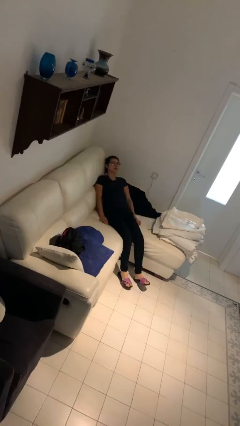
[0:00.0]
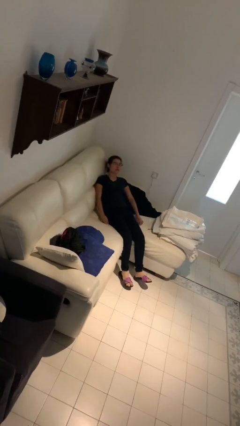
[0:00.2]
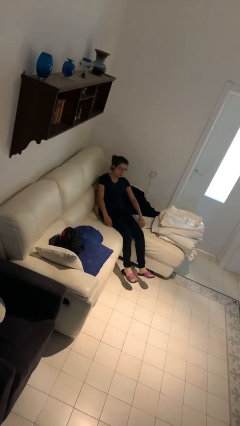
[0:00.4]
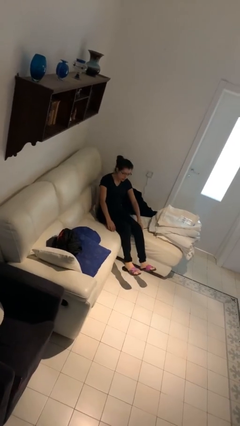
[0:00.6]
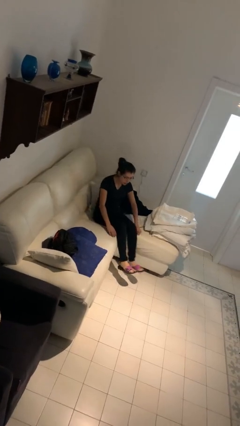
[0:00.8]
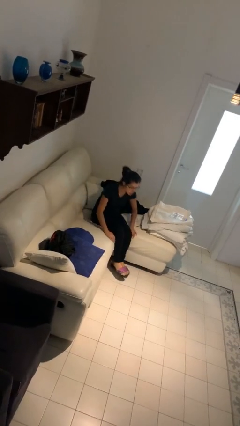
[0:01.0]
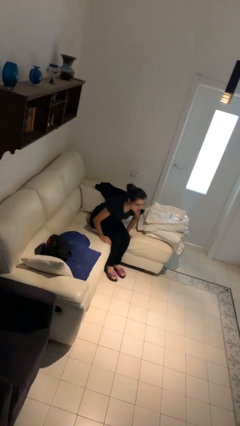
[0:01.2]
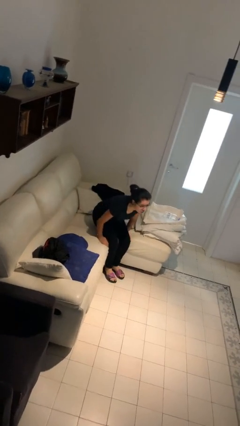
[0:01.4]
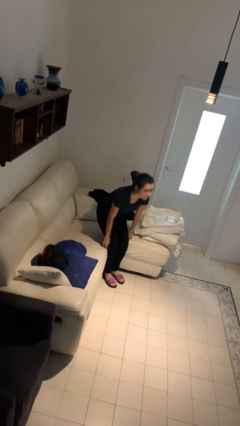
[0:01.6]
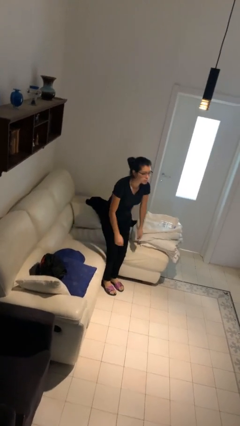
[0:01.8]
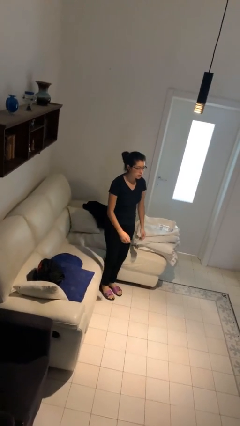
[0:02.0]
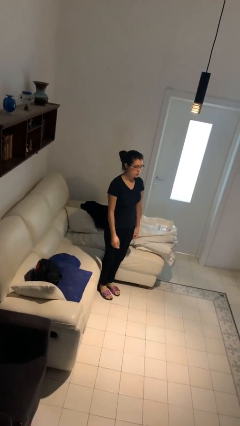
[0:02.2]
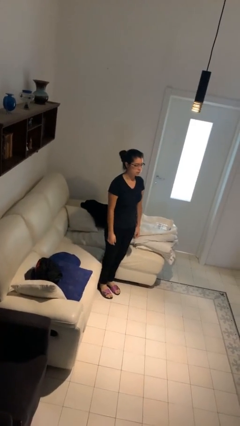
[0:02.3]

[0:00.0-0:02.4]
person stands up

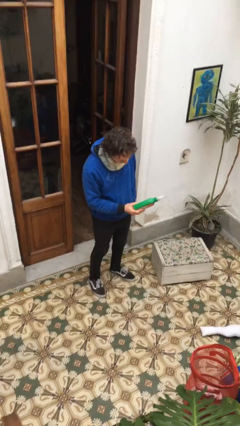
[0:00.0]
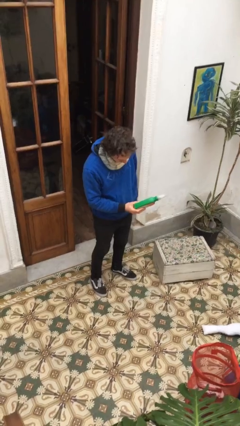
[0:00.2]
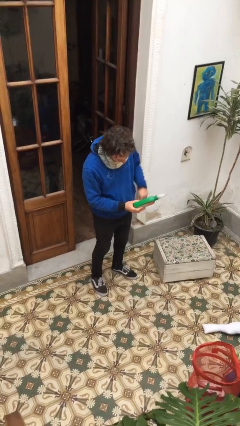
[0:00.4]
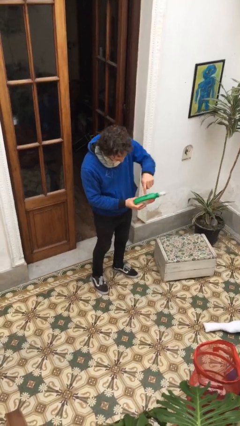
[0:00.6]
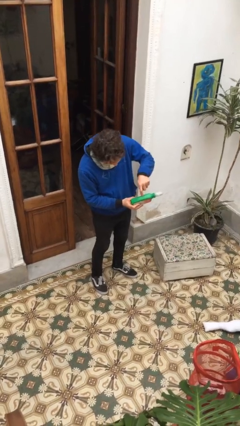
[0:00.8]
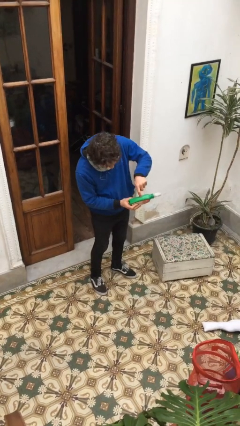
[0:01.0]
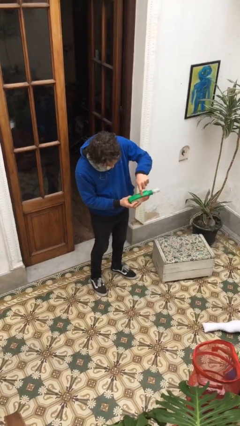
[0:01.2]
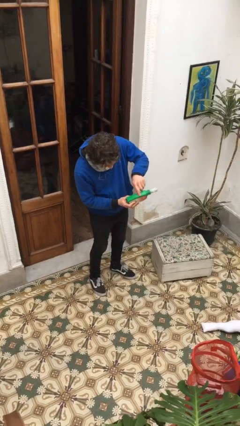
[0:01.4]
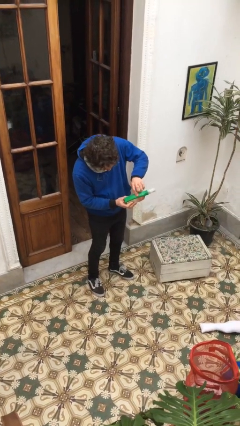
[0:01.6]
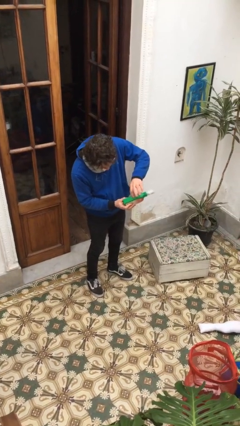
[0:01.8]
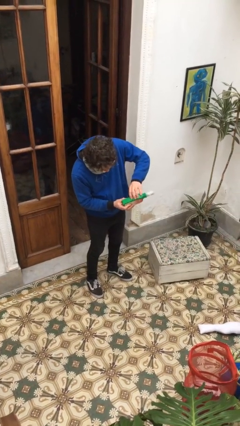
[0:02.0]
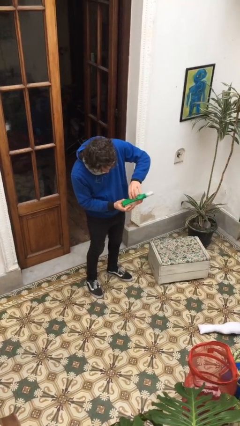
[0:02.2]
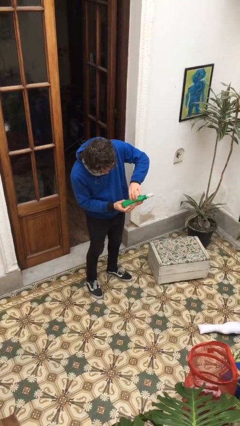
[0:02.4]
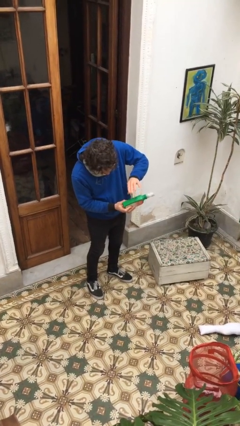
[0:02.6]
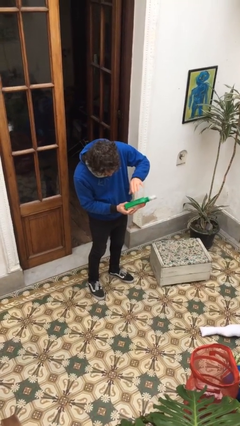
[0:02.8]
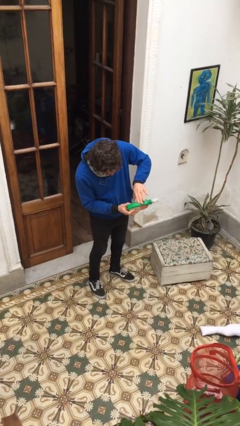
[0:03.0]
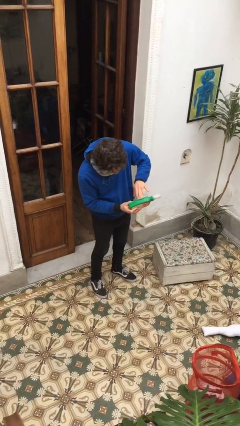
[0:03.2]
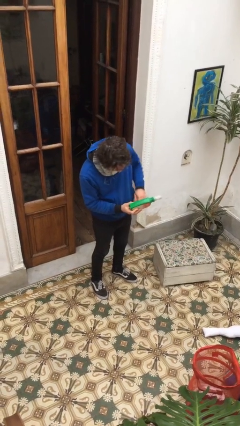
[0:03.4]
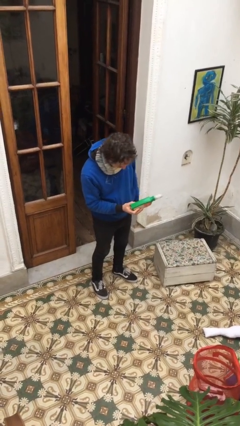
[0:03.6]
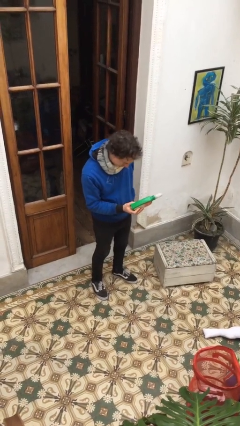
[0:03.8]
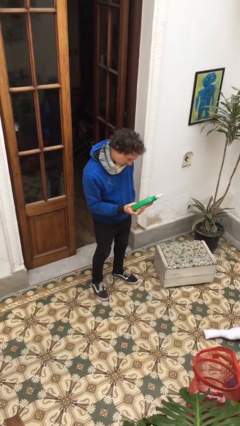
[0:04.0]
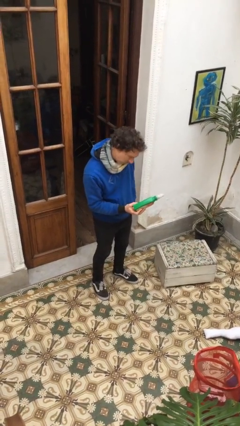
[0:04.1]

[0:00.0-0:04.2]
person taps object with finger

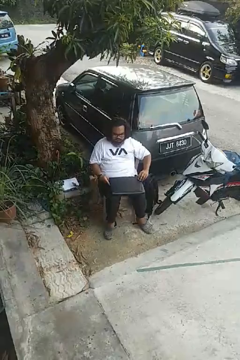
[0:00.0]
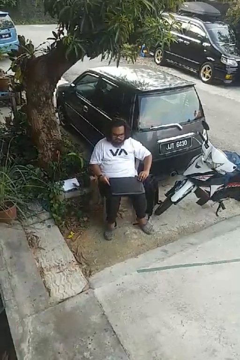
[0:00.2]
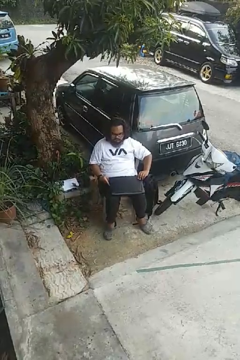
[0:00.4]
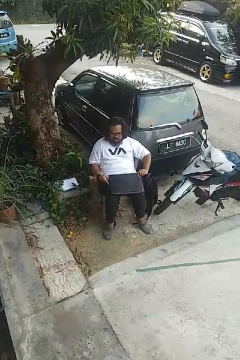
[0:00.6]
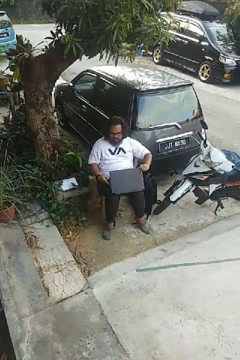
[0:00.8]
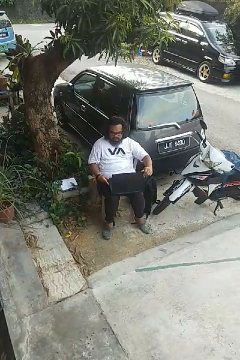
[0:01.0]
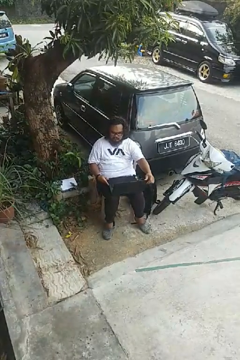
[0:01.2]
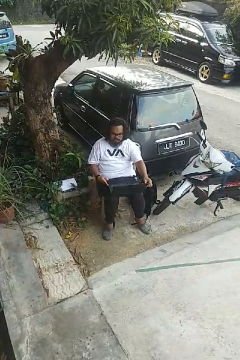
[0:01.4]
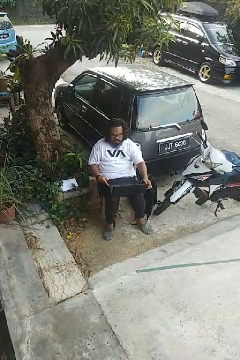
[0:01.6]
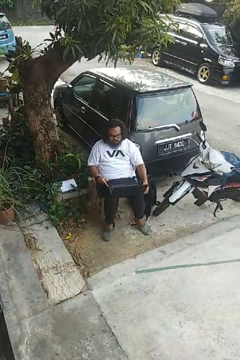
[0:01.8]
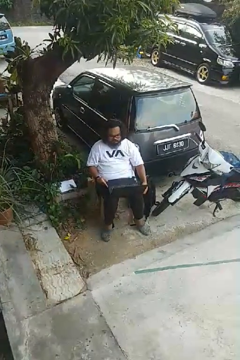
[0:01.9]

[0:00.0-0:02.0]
person opens laptop

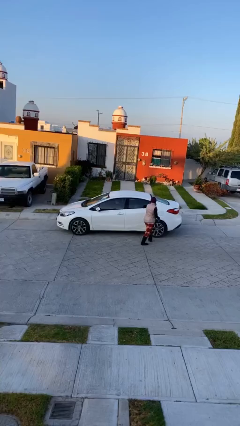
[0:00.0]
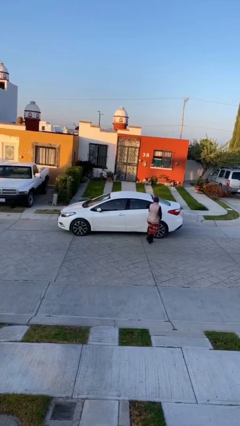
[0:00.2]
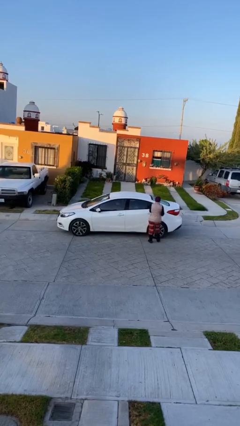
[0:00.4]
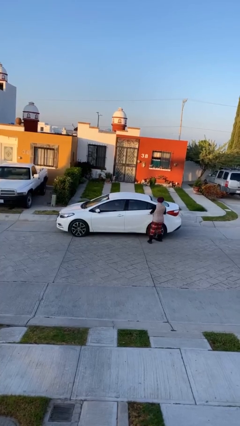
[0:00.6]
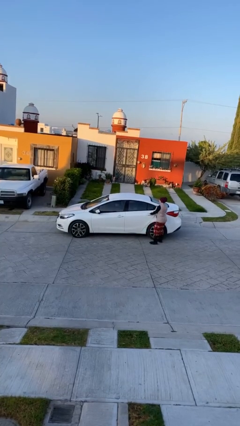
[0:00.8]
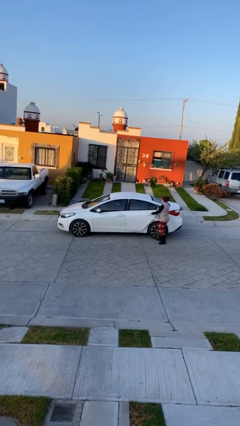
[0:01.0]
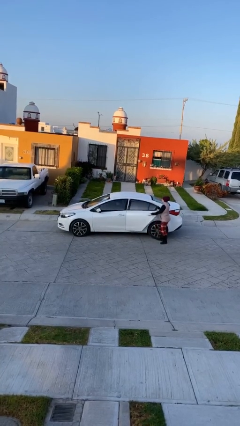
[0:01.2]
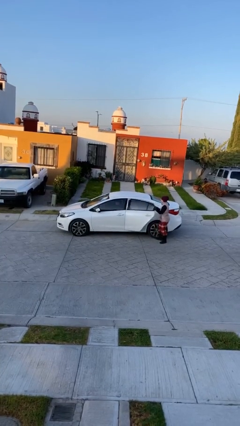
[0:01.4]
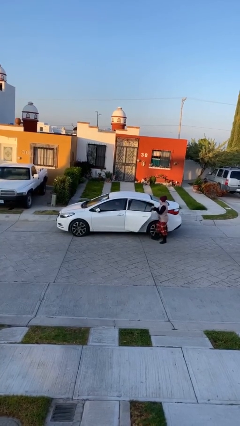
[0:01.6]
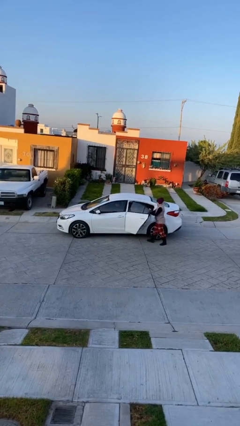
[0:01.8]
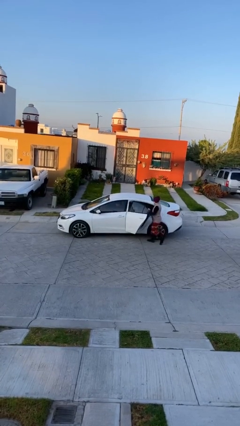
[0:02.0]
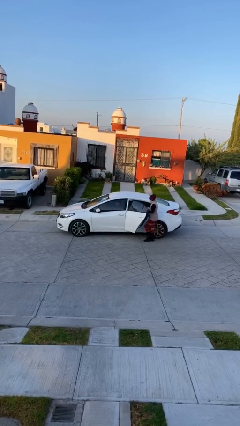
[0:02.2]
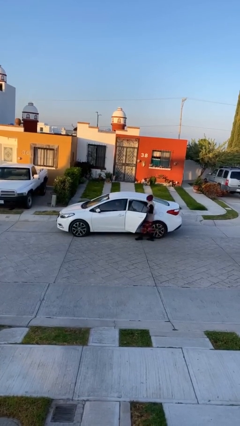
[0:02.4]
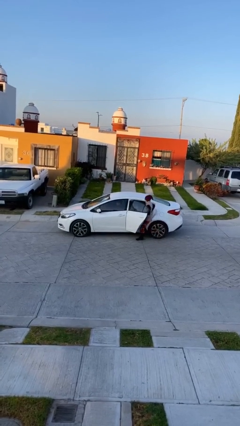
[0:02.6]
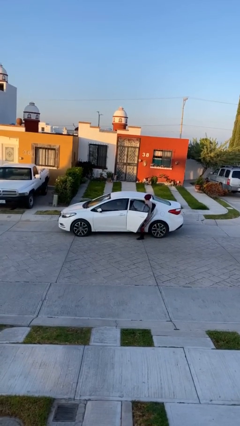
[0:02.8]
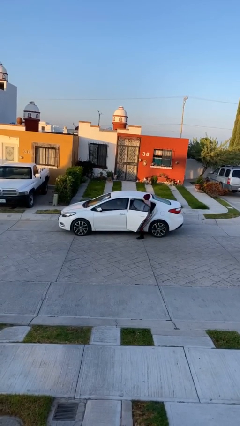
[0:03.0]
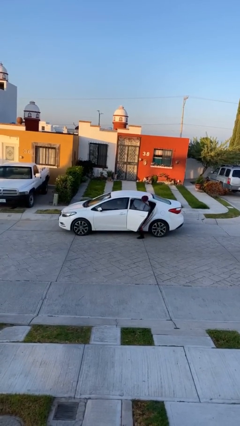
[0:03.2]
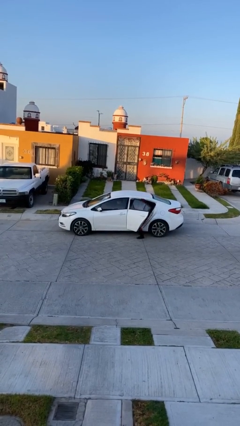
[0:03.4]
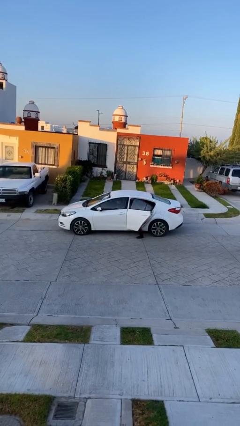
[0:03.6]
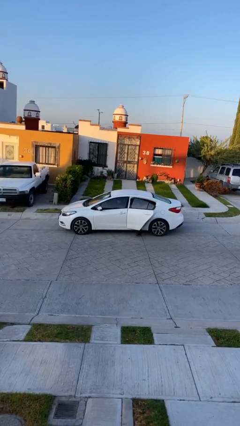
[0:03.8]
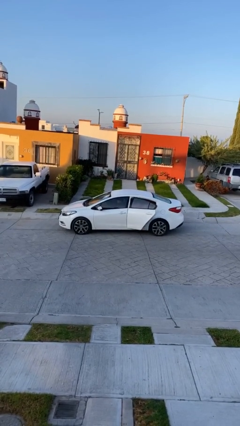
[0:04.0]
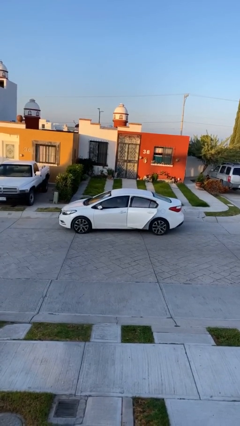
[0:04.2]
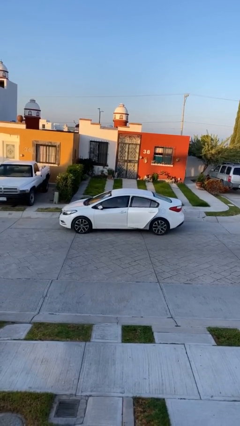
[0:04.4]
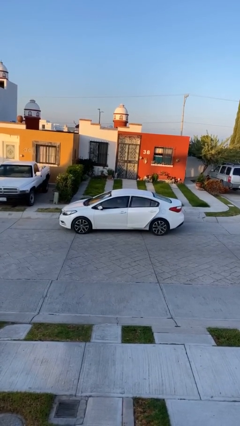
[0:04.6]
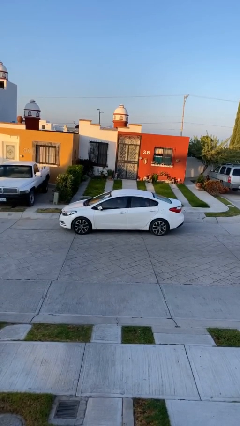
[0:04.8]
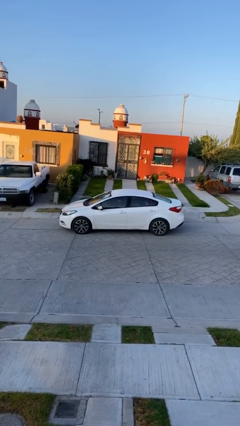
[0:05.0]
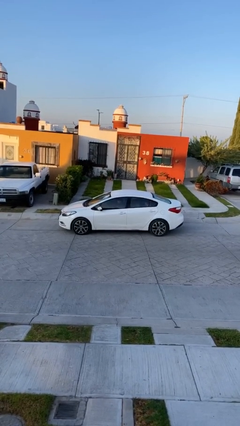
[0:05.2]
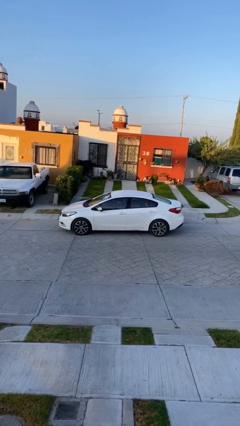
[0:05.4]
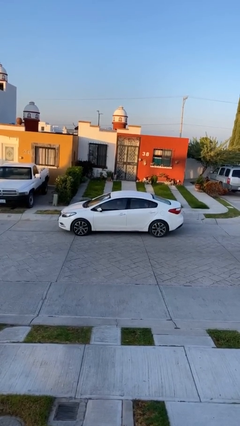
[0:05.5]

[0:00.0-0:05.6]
car picks up person

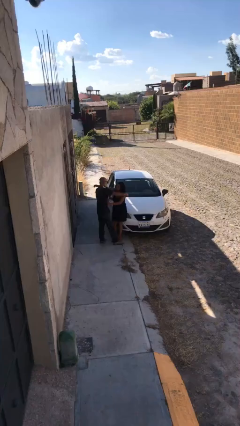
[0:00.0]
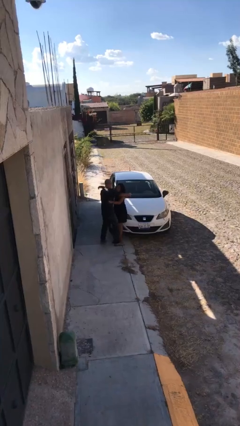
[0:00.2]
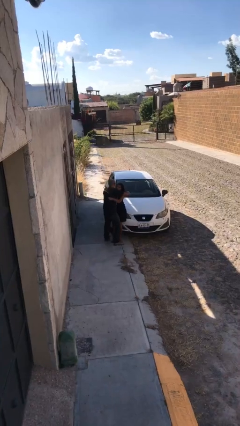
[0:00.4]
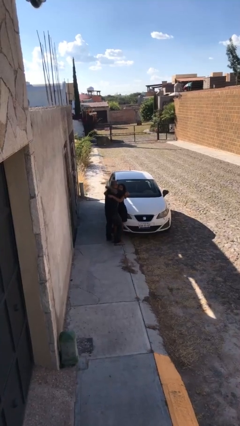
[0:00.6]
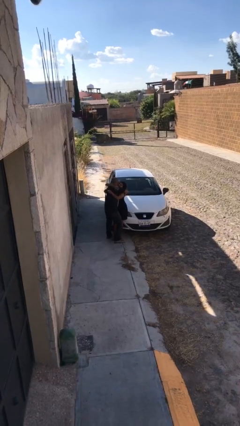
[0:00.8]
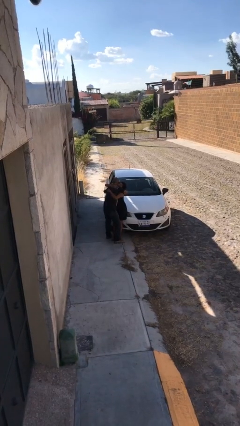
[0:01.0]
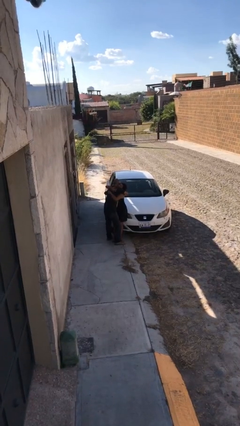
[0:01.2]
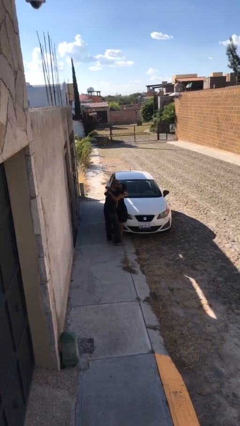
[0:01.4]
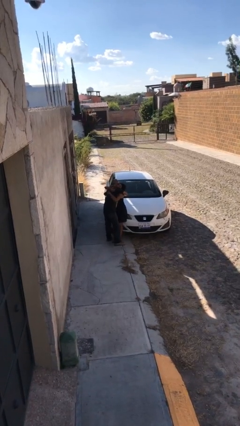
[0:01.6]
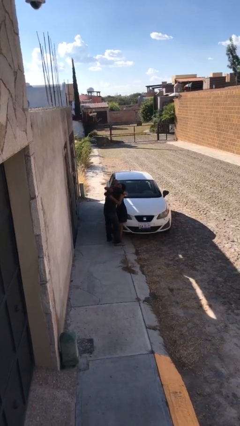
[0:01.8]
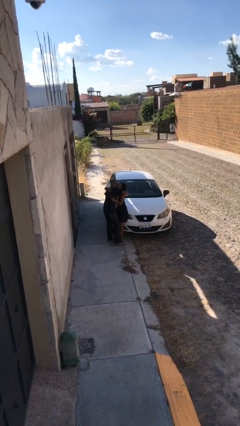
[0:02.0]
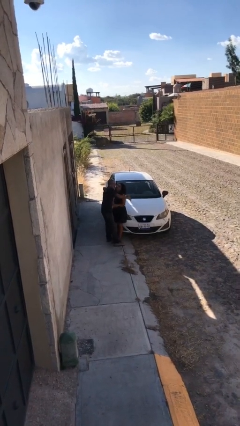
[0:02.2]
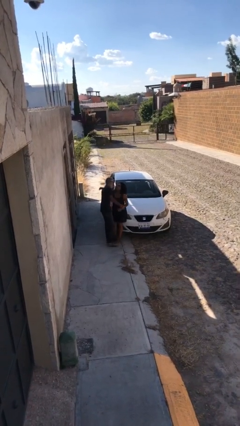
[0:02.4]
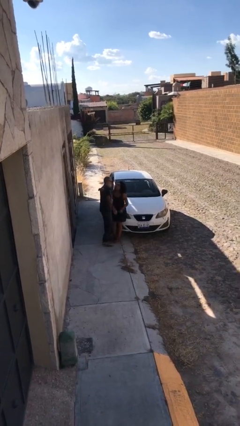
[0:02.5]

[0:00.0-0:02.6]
person embraces person

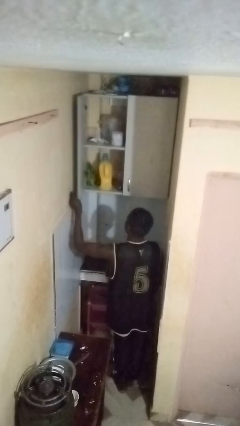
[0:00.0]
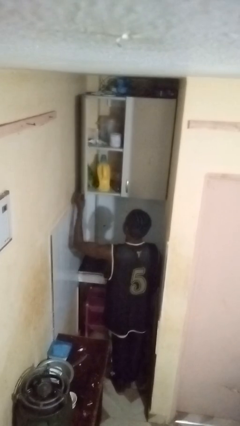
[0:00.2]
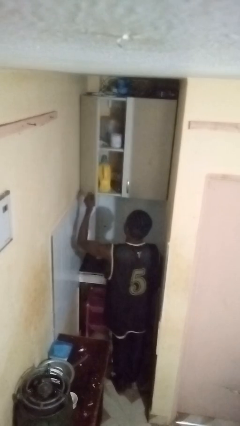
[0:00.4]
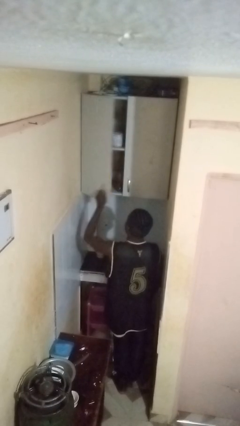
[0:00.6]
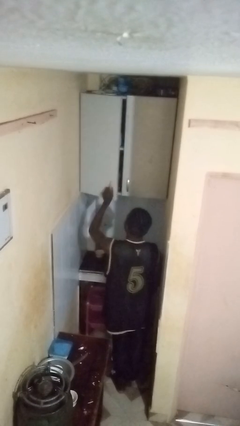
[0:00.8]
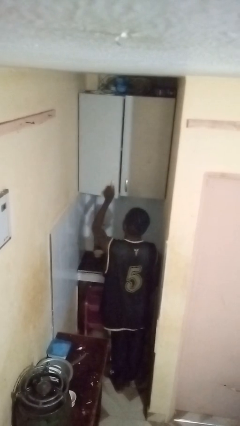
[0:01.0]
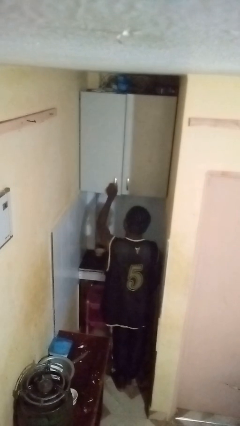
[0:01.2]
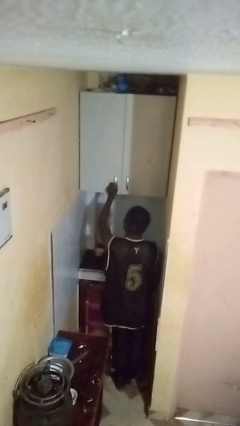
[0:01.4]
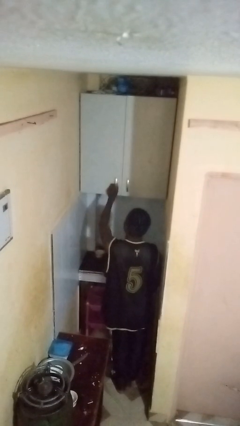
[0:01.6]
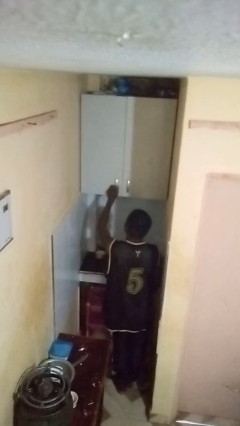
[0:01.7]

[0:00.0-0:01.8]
person closes cabinet
